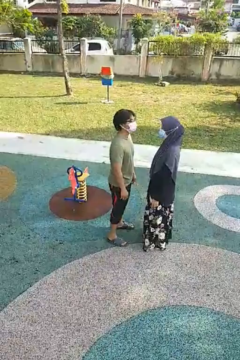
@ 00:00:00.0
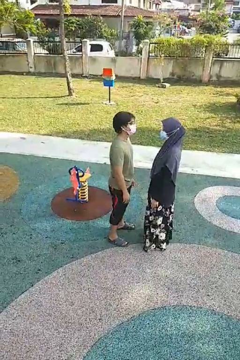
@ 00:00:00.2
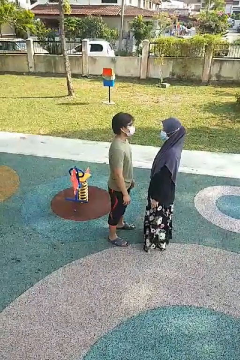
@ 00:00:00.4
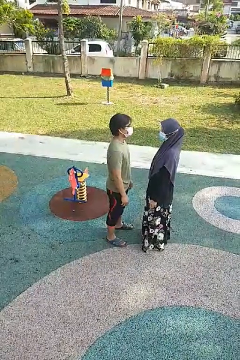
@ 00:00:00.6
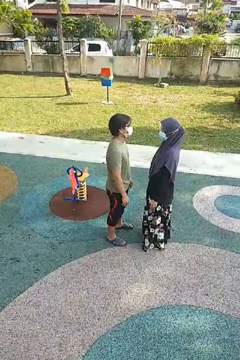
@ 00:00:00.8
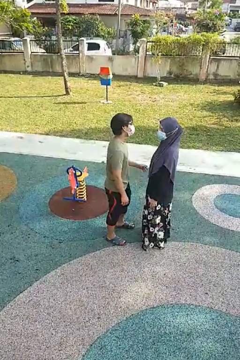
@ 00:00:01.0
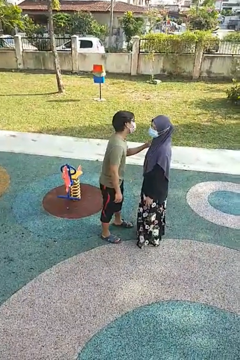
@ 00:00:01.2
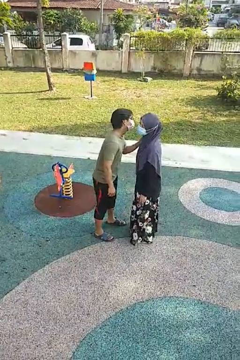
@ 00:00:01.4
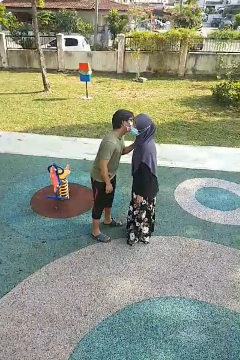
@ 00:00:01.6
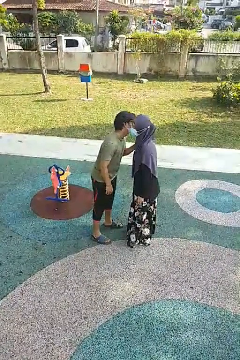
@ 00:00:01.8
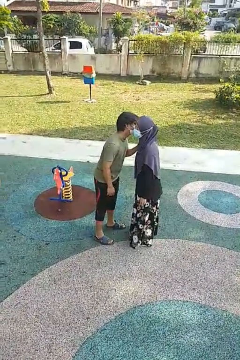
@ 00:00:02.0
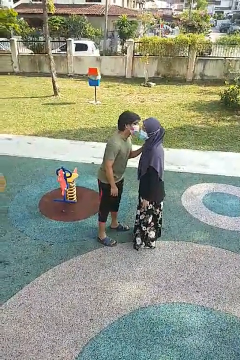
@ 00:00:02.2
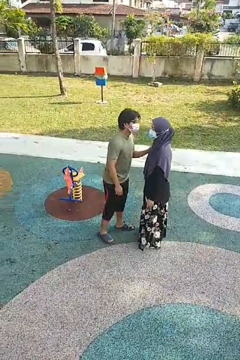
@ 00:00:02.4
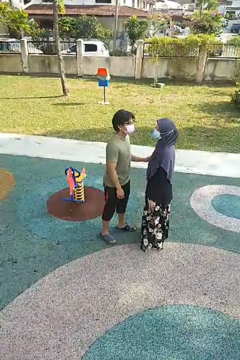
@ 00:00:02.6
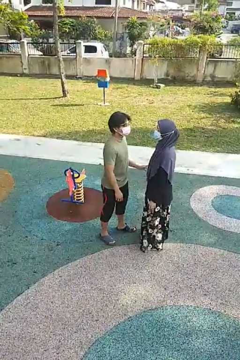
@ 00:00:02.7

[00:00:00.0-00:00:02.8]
person kisses cheek of person

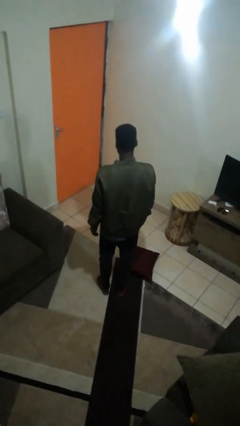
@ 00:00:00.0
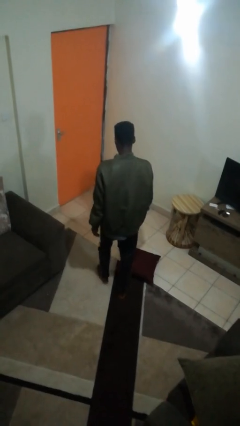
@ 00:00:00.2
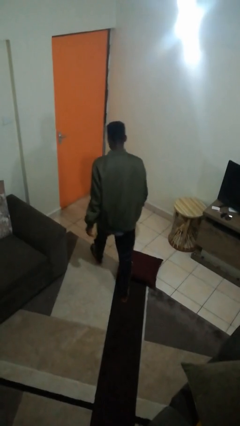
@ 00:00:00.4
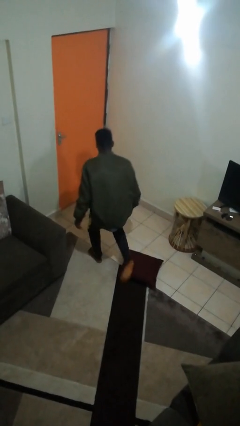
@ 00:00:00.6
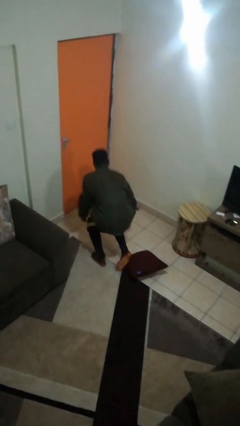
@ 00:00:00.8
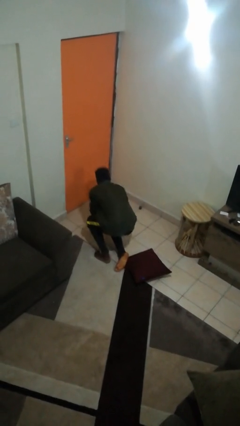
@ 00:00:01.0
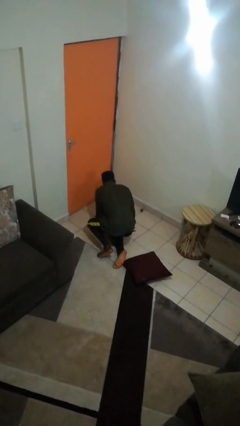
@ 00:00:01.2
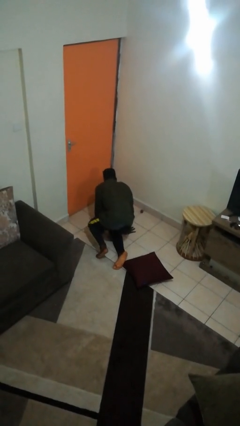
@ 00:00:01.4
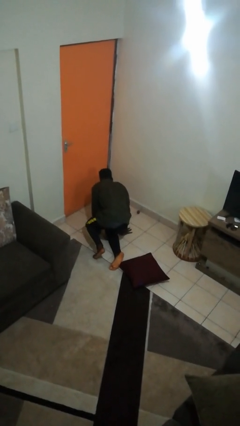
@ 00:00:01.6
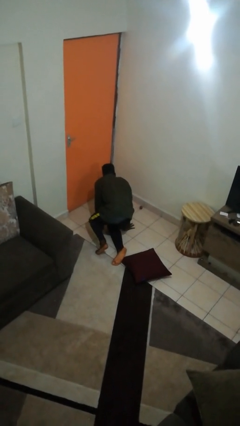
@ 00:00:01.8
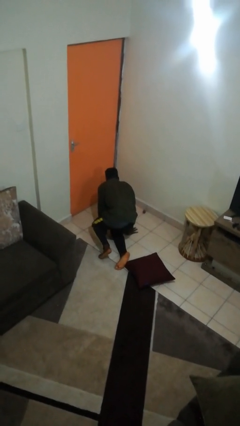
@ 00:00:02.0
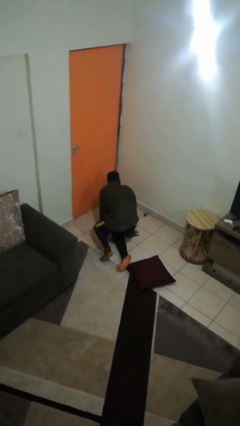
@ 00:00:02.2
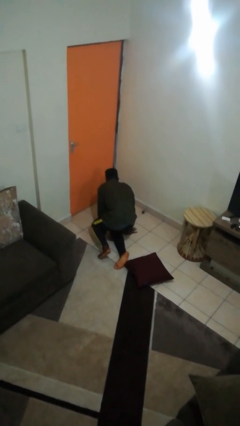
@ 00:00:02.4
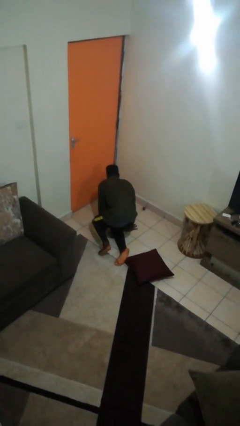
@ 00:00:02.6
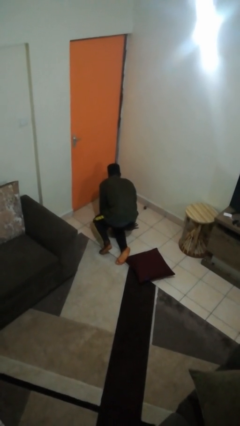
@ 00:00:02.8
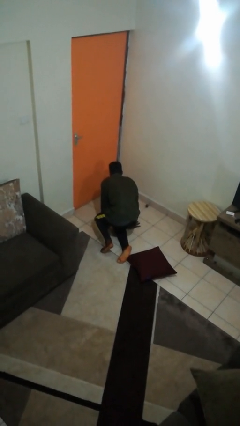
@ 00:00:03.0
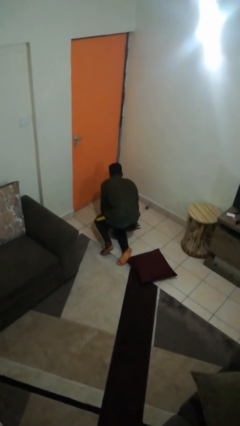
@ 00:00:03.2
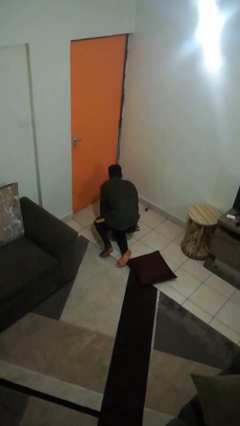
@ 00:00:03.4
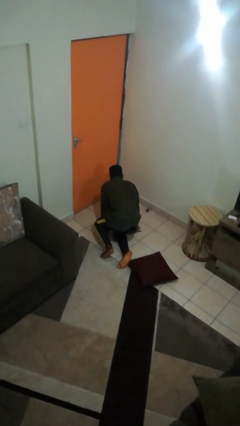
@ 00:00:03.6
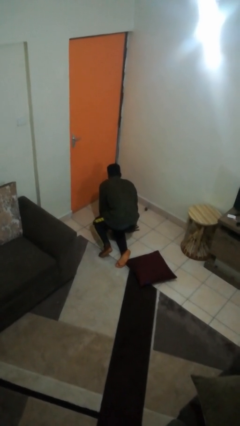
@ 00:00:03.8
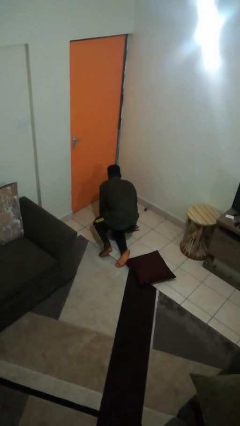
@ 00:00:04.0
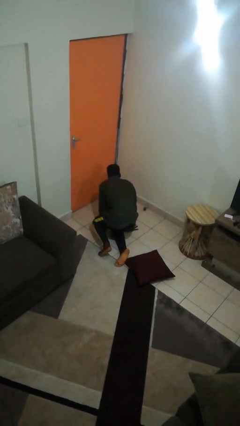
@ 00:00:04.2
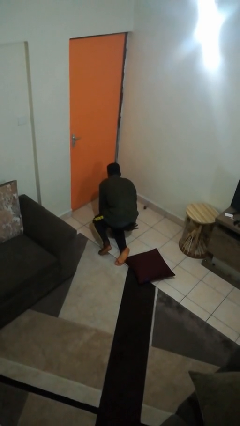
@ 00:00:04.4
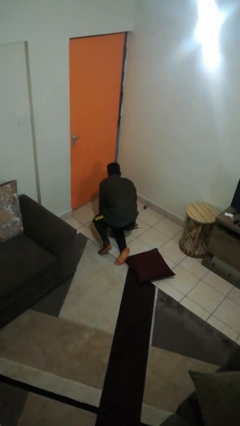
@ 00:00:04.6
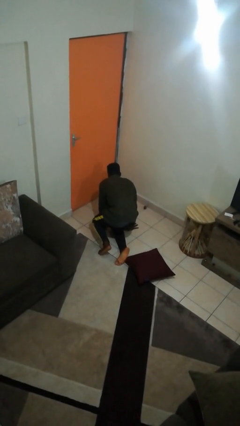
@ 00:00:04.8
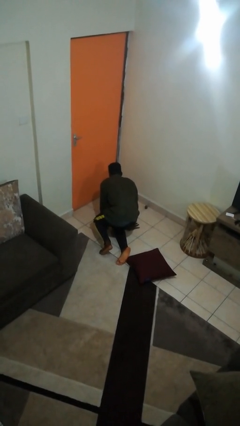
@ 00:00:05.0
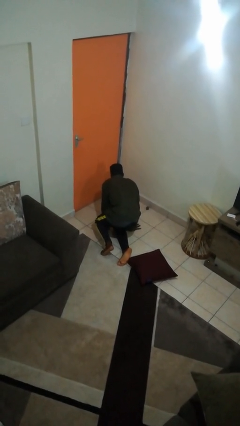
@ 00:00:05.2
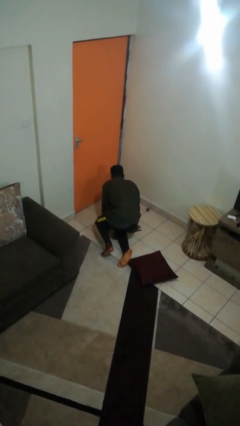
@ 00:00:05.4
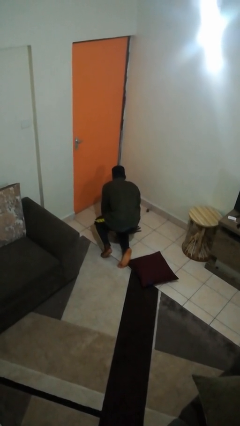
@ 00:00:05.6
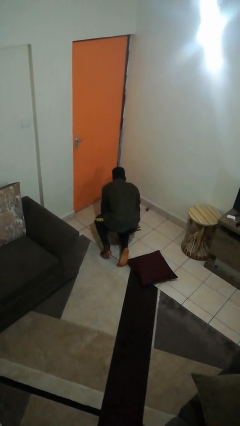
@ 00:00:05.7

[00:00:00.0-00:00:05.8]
person trips on object on floor

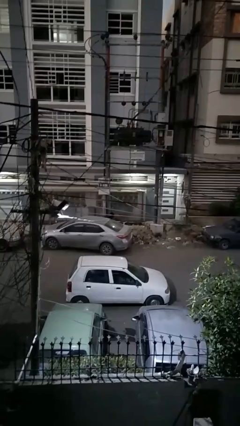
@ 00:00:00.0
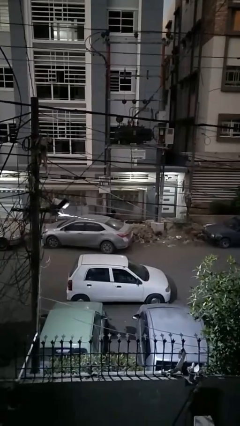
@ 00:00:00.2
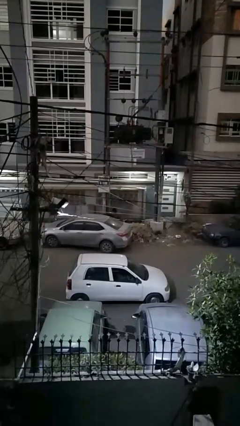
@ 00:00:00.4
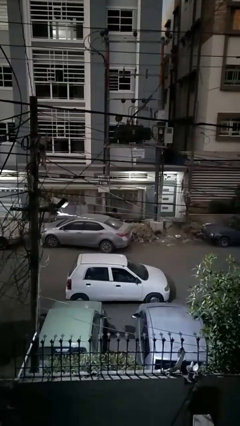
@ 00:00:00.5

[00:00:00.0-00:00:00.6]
person loads car

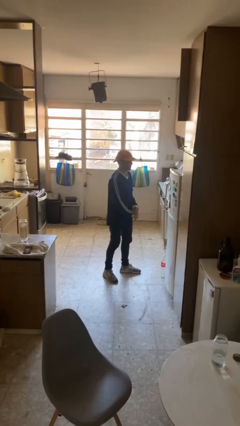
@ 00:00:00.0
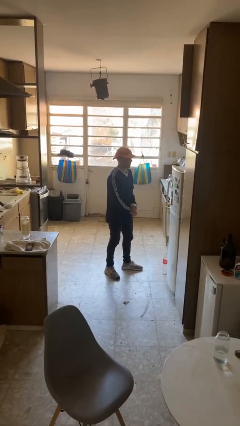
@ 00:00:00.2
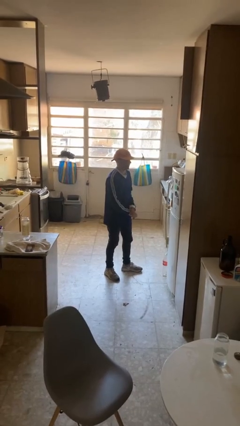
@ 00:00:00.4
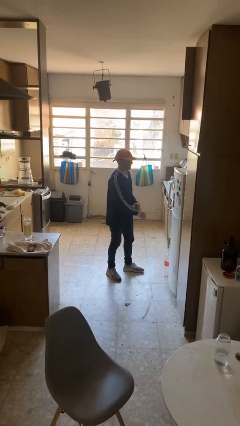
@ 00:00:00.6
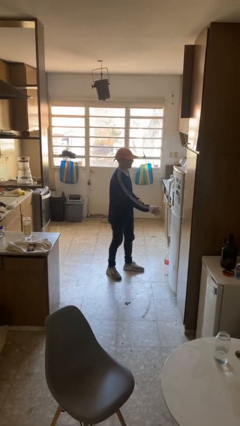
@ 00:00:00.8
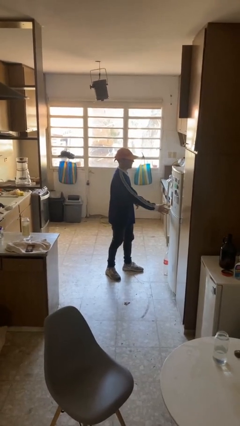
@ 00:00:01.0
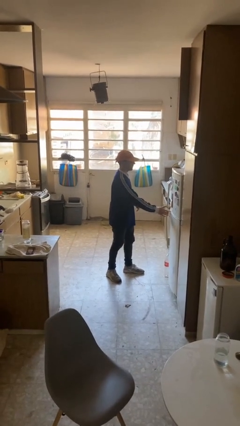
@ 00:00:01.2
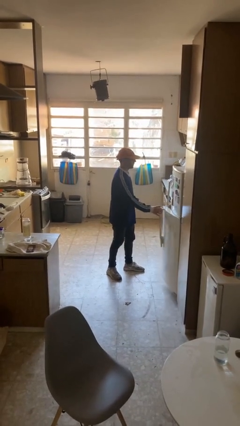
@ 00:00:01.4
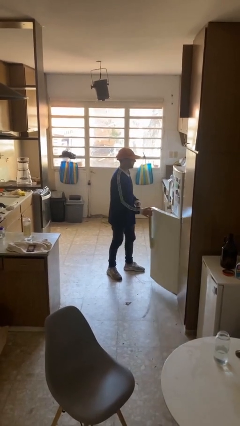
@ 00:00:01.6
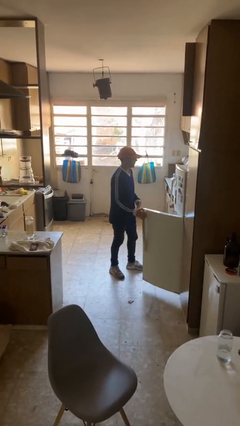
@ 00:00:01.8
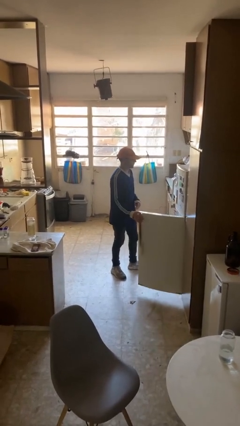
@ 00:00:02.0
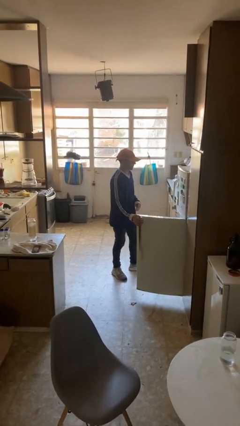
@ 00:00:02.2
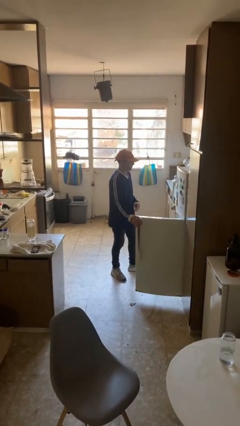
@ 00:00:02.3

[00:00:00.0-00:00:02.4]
person opens refrigerator

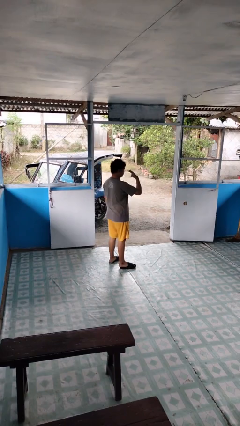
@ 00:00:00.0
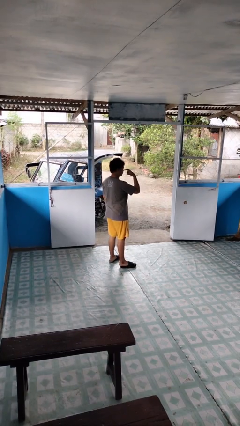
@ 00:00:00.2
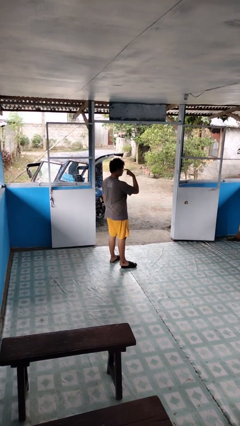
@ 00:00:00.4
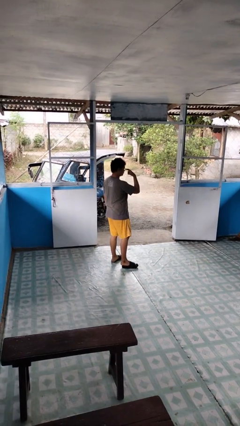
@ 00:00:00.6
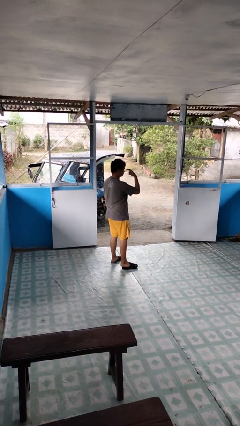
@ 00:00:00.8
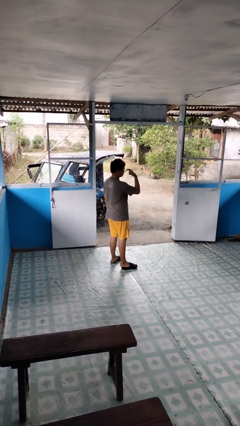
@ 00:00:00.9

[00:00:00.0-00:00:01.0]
person gestures watch closely

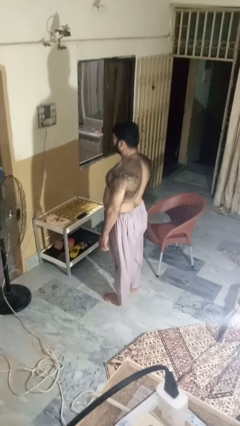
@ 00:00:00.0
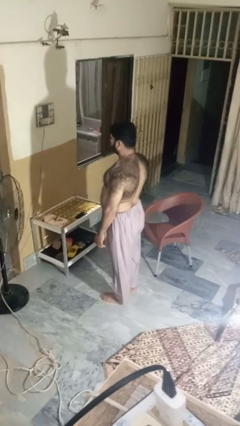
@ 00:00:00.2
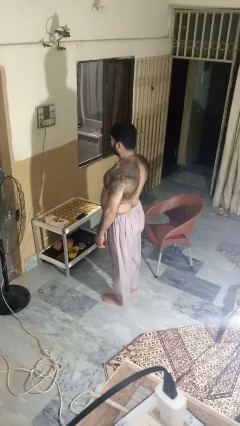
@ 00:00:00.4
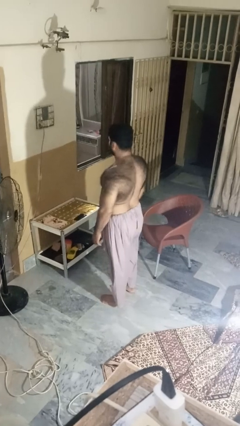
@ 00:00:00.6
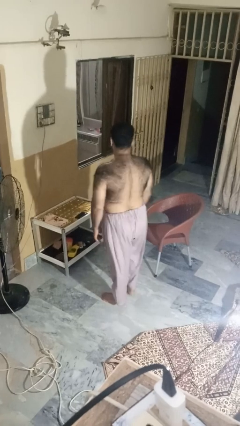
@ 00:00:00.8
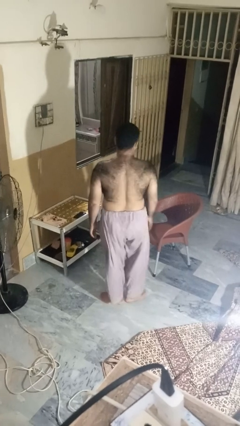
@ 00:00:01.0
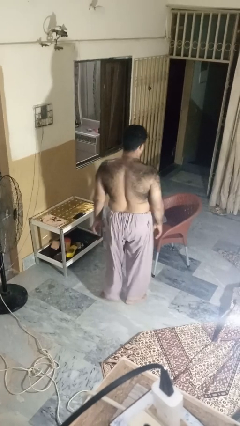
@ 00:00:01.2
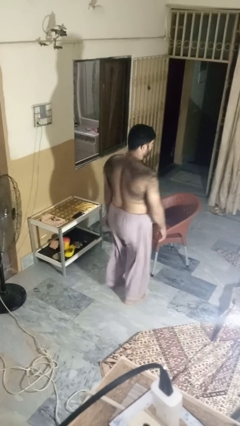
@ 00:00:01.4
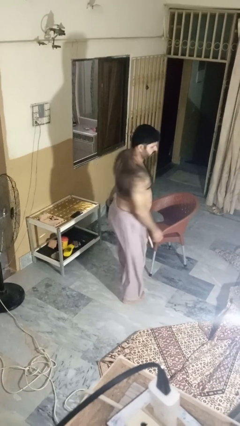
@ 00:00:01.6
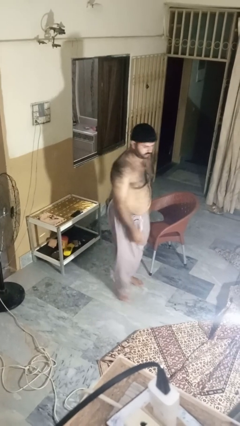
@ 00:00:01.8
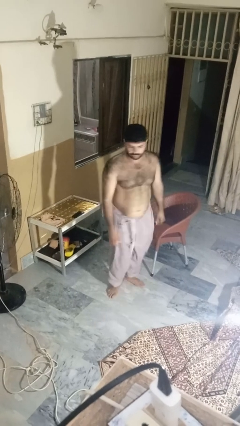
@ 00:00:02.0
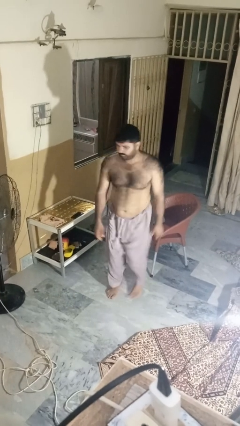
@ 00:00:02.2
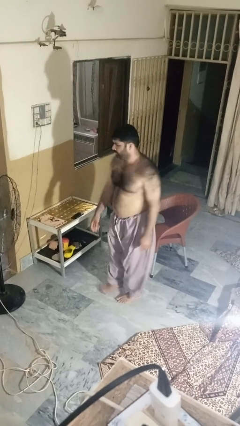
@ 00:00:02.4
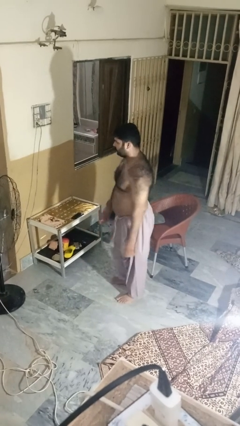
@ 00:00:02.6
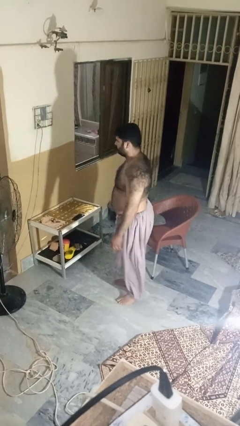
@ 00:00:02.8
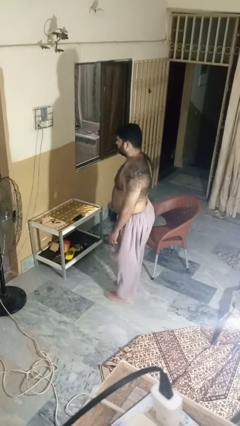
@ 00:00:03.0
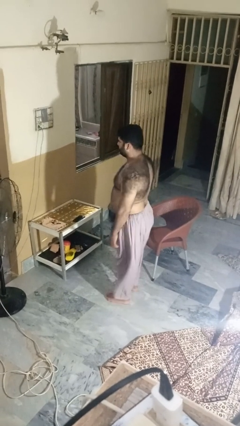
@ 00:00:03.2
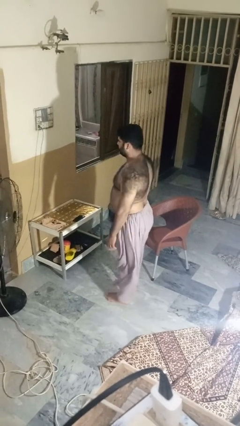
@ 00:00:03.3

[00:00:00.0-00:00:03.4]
person twirls

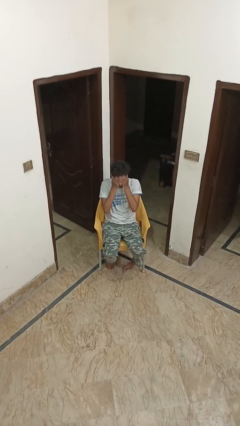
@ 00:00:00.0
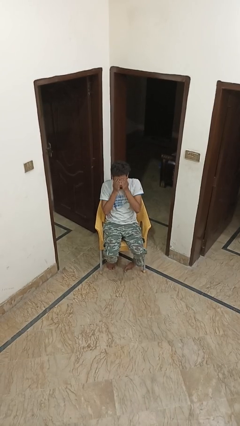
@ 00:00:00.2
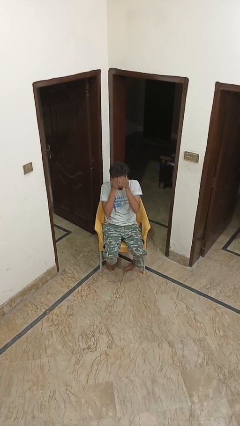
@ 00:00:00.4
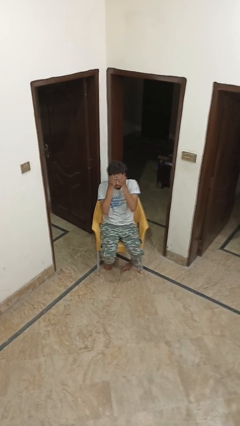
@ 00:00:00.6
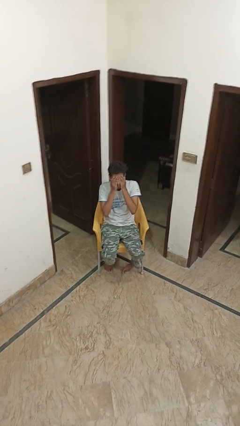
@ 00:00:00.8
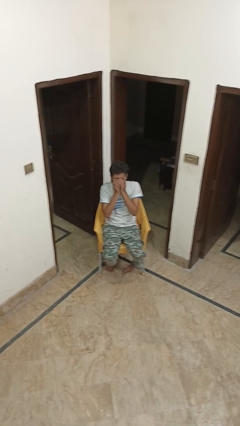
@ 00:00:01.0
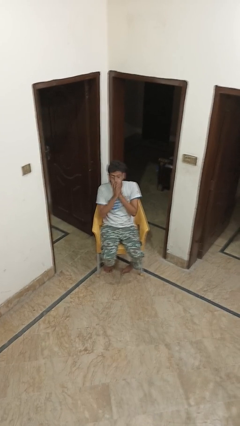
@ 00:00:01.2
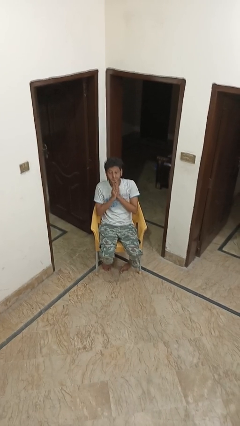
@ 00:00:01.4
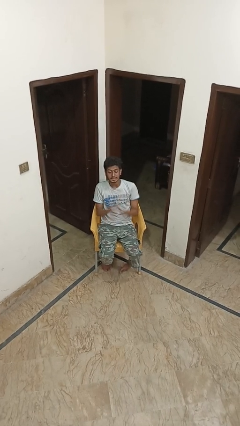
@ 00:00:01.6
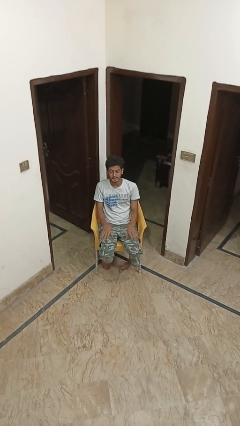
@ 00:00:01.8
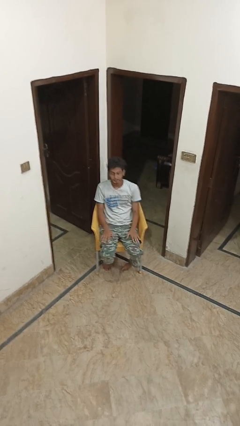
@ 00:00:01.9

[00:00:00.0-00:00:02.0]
person scratches face
